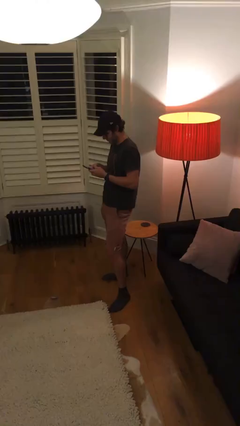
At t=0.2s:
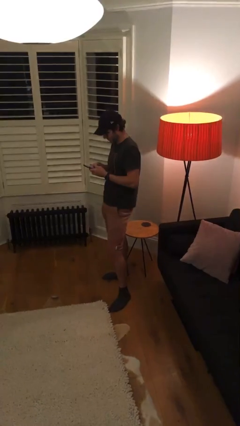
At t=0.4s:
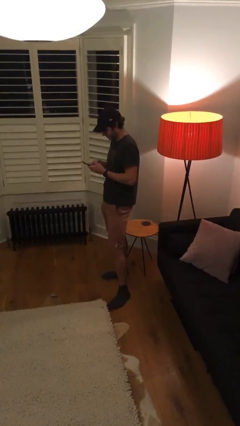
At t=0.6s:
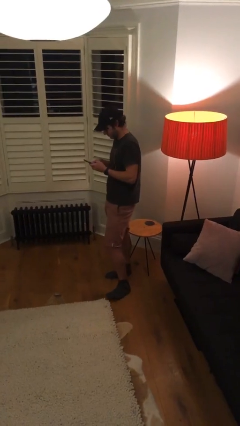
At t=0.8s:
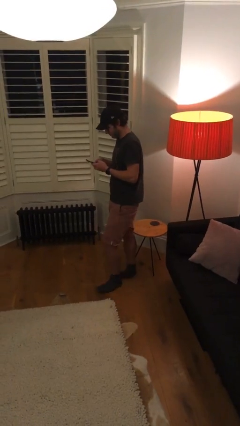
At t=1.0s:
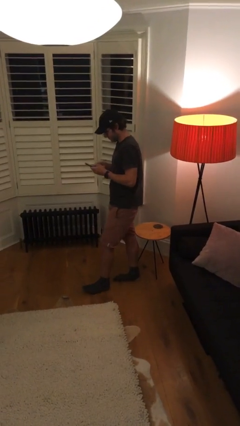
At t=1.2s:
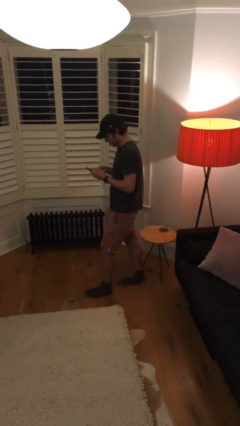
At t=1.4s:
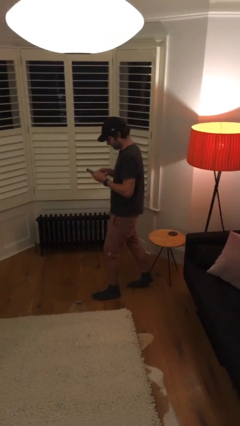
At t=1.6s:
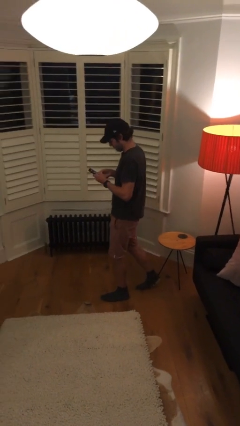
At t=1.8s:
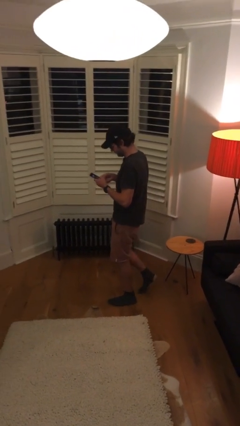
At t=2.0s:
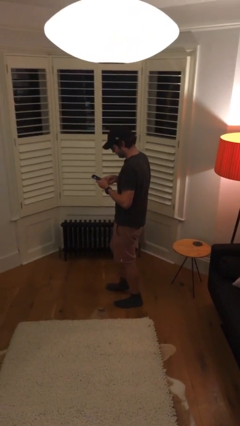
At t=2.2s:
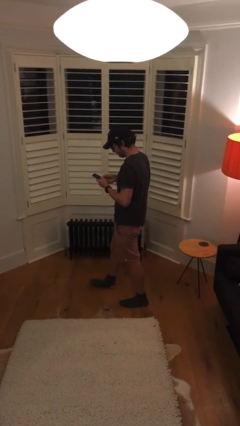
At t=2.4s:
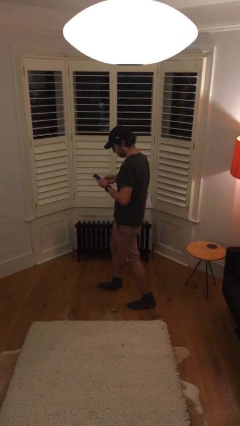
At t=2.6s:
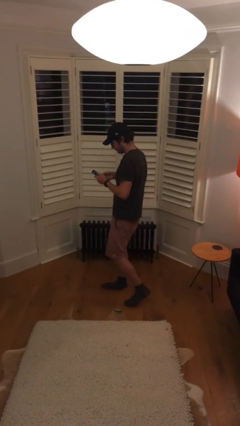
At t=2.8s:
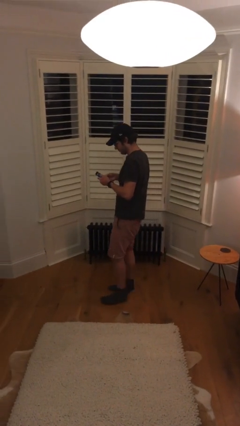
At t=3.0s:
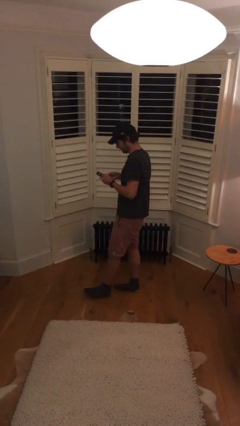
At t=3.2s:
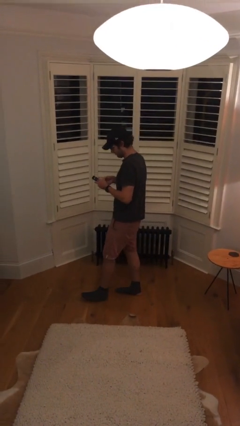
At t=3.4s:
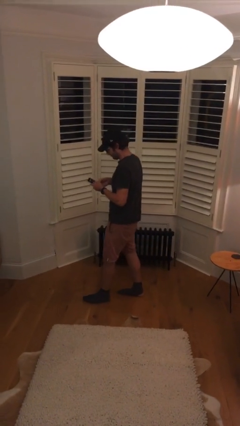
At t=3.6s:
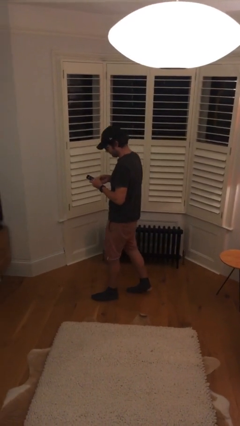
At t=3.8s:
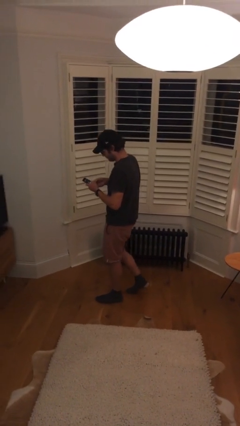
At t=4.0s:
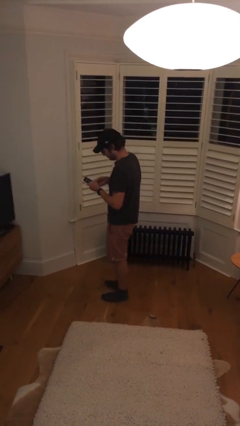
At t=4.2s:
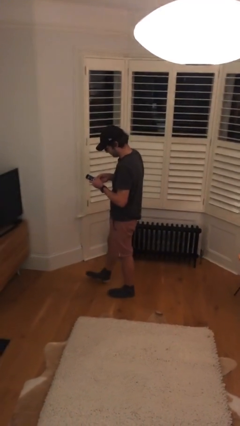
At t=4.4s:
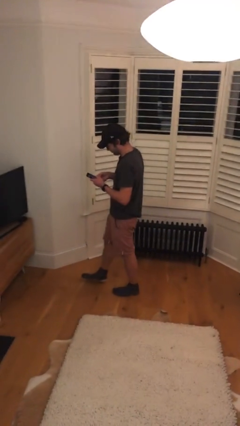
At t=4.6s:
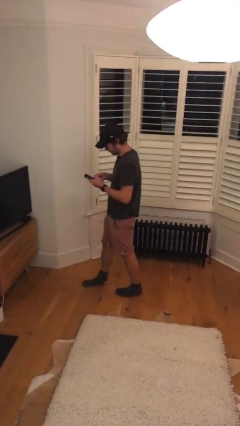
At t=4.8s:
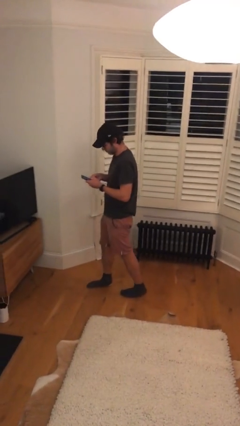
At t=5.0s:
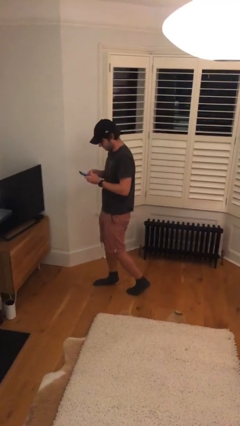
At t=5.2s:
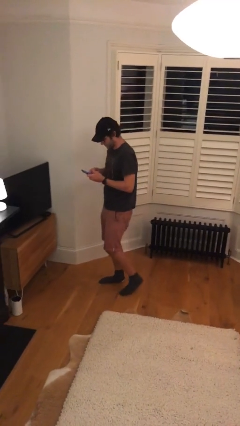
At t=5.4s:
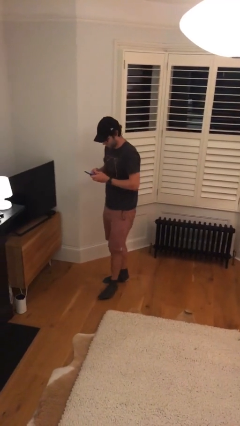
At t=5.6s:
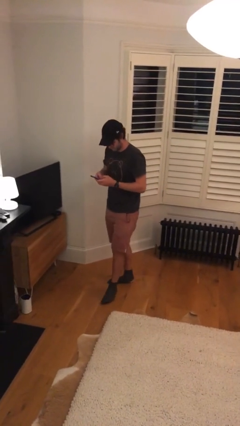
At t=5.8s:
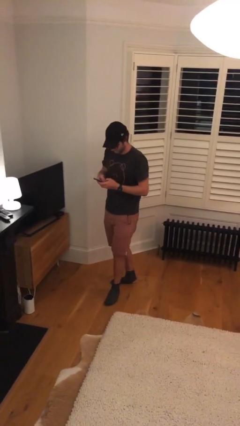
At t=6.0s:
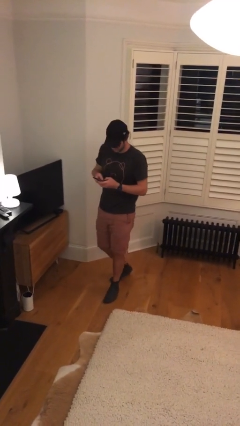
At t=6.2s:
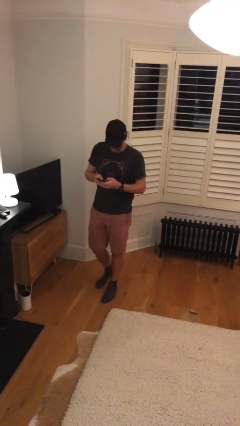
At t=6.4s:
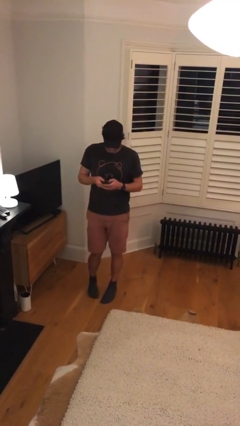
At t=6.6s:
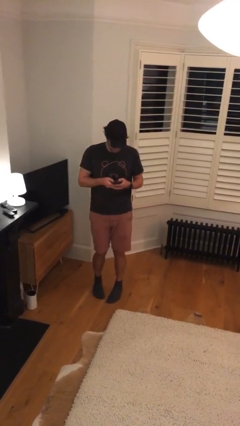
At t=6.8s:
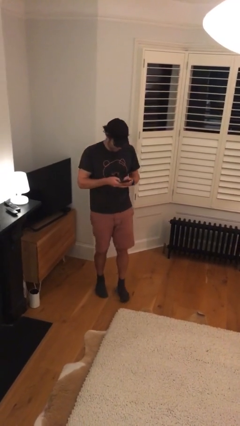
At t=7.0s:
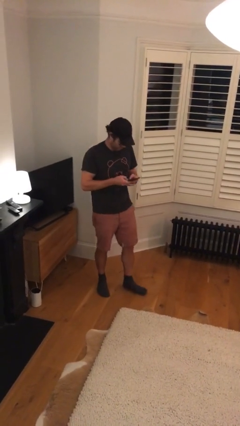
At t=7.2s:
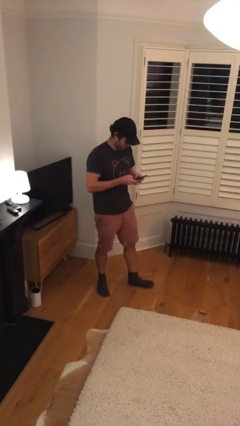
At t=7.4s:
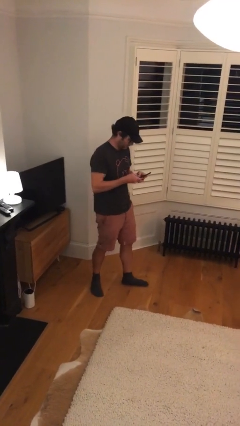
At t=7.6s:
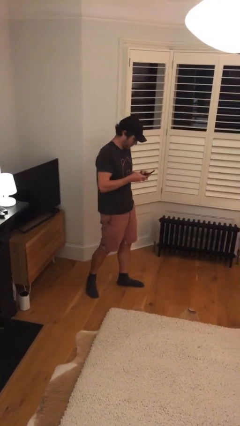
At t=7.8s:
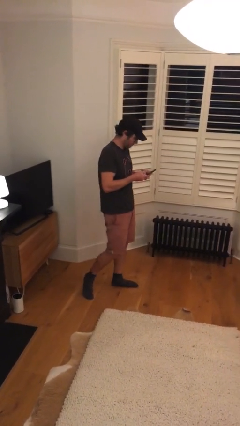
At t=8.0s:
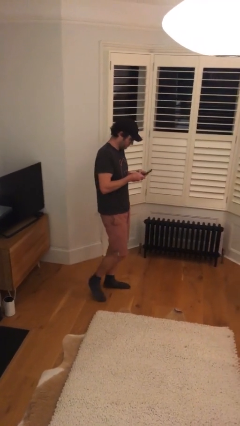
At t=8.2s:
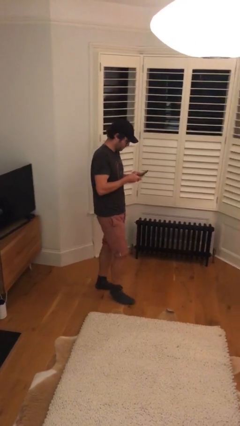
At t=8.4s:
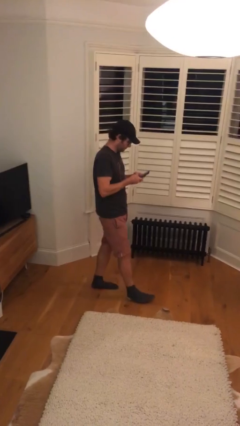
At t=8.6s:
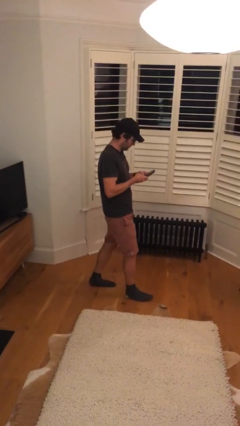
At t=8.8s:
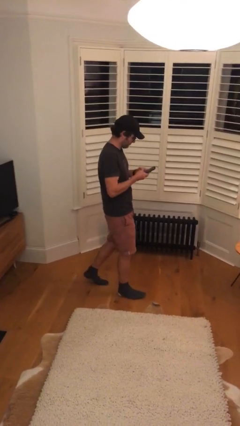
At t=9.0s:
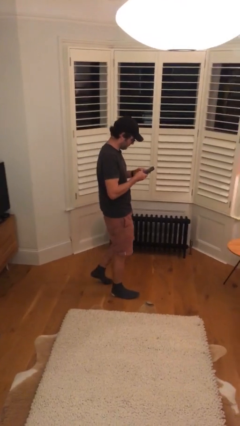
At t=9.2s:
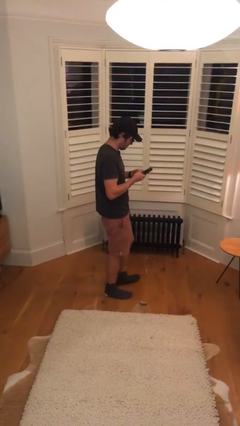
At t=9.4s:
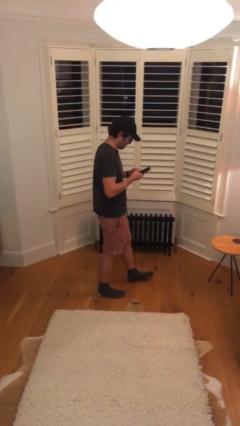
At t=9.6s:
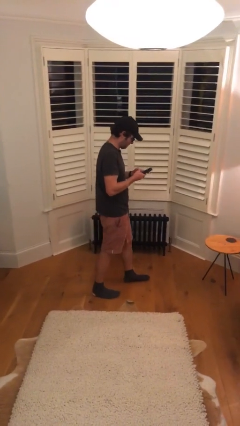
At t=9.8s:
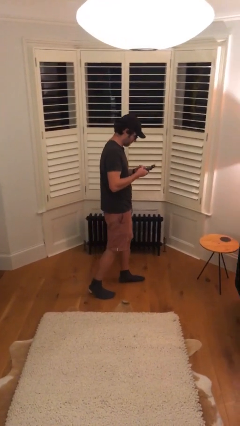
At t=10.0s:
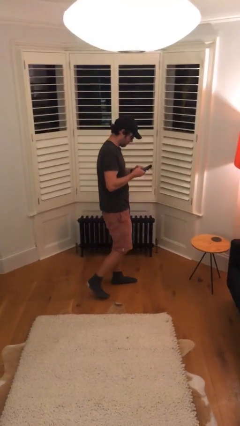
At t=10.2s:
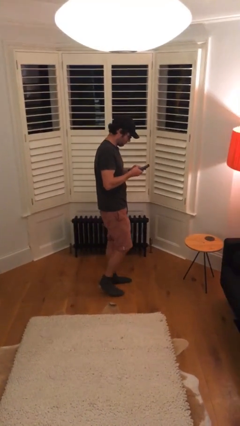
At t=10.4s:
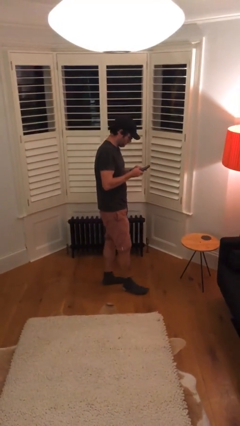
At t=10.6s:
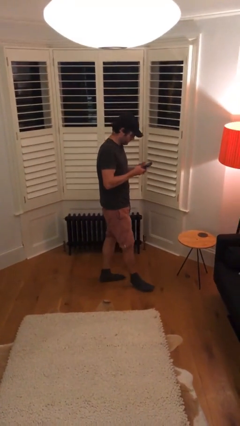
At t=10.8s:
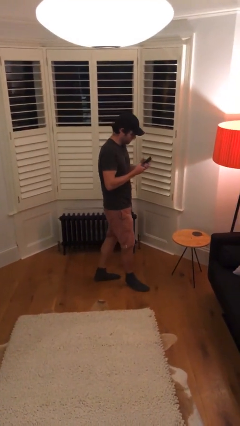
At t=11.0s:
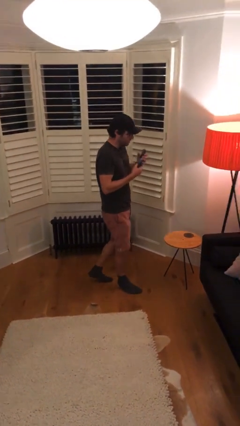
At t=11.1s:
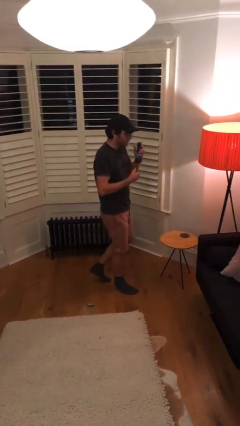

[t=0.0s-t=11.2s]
person texts on phone

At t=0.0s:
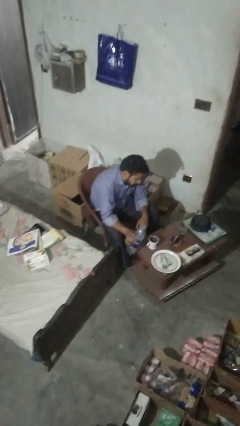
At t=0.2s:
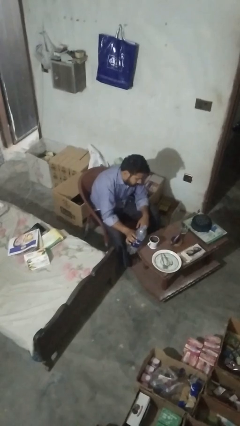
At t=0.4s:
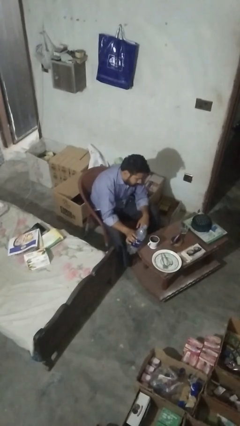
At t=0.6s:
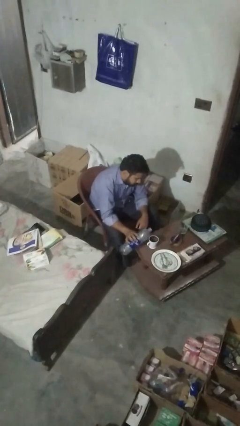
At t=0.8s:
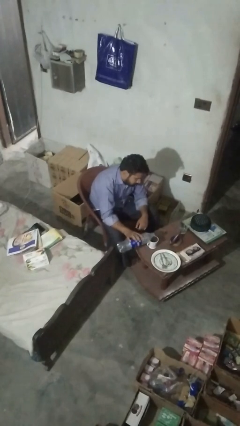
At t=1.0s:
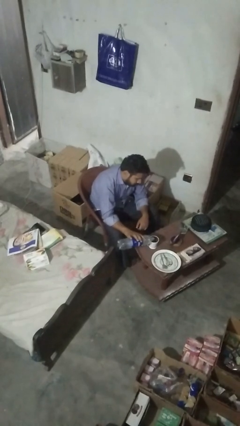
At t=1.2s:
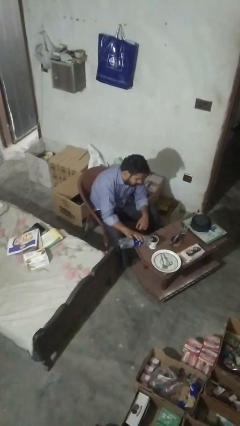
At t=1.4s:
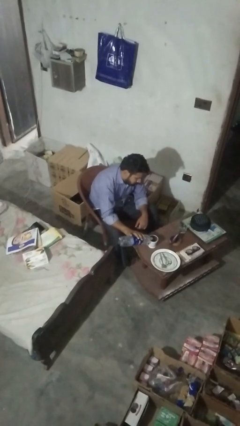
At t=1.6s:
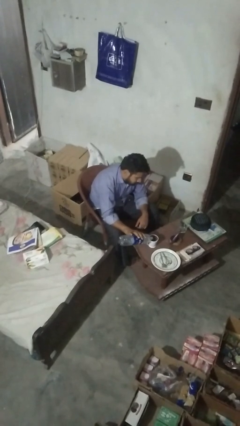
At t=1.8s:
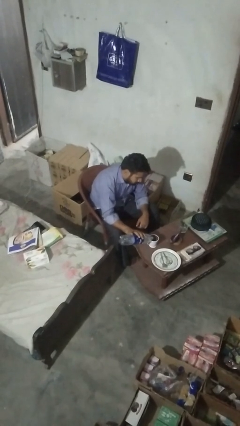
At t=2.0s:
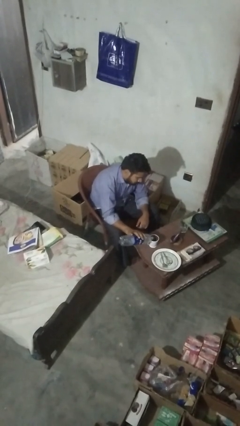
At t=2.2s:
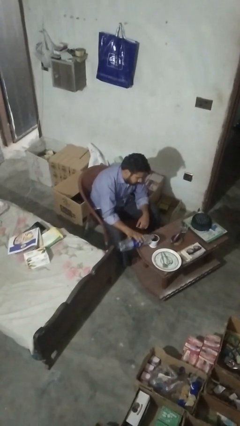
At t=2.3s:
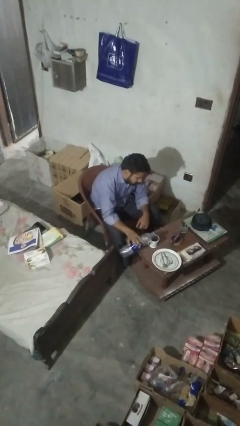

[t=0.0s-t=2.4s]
person pours liquid into cup

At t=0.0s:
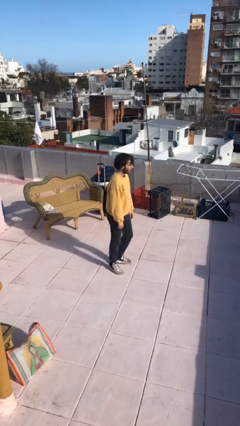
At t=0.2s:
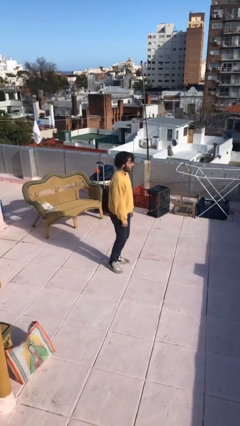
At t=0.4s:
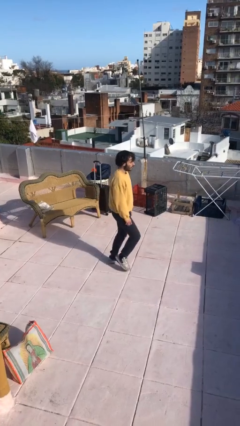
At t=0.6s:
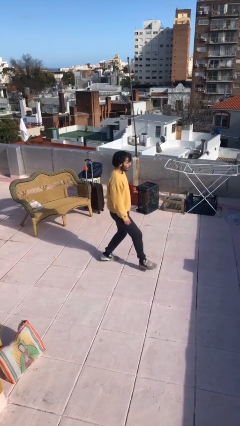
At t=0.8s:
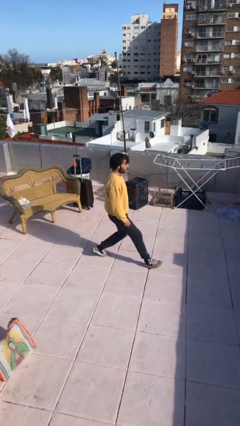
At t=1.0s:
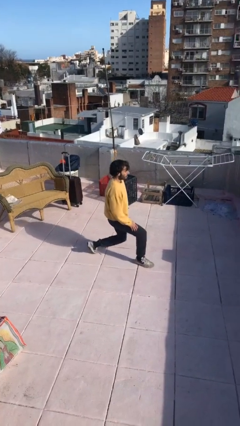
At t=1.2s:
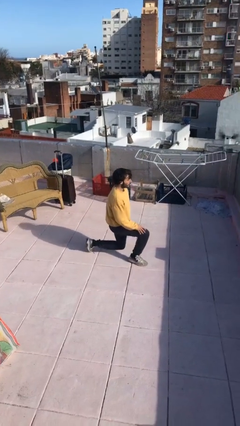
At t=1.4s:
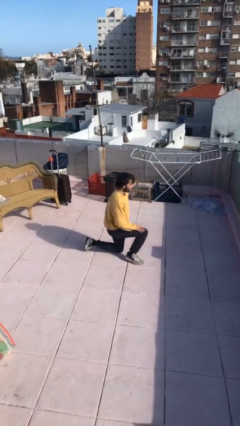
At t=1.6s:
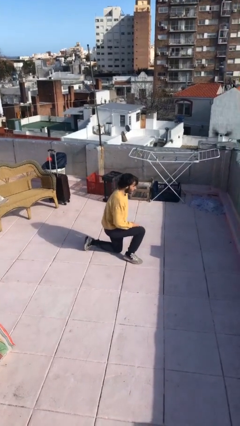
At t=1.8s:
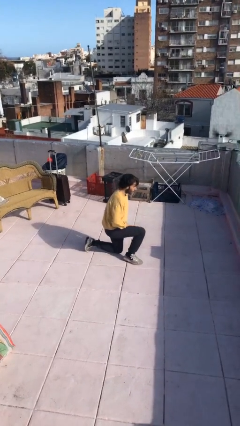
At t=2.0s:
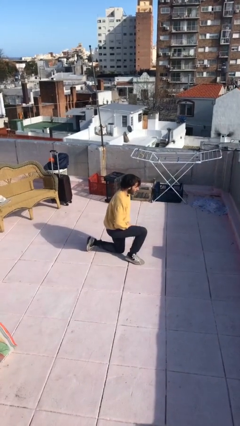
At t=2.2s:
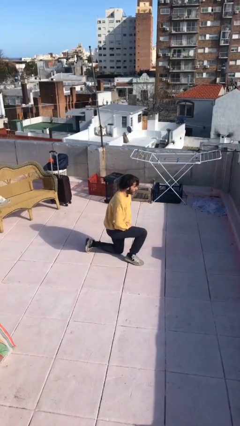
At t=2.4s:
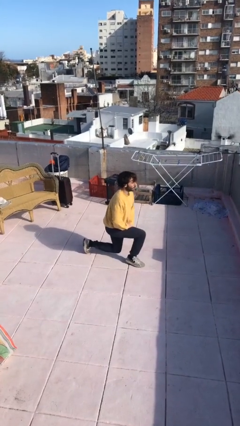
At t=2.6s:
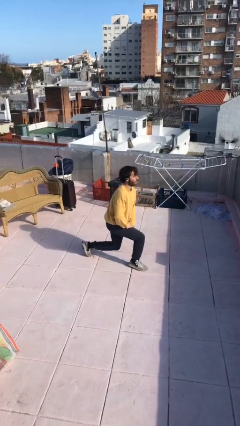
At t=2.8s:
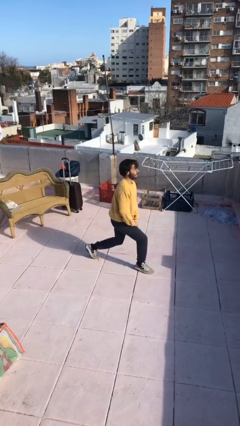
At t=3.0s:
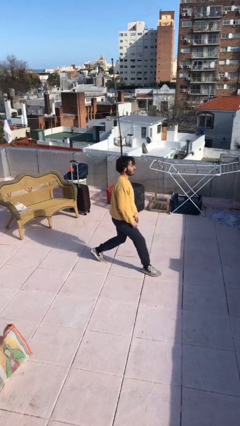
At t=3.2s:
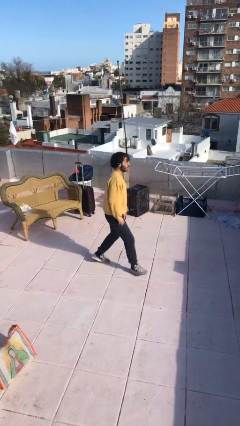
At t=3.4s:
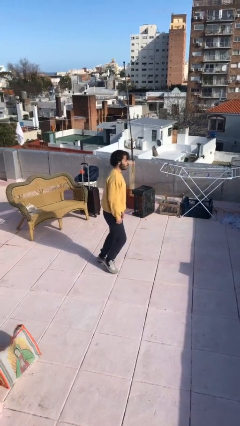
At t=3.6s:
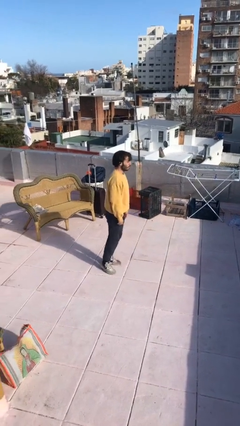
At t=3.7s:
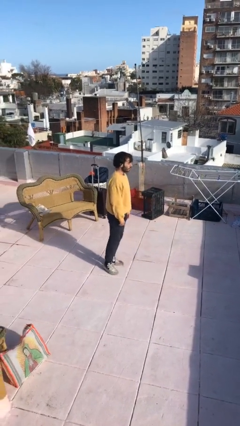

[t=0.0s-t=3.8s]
person exercises with lunges

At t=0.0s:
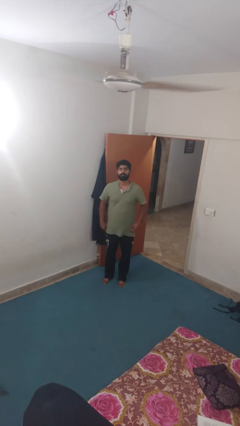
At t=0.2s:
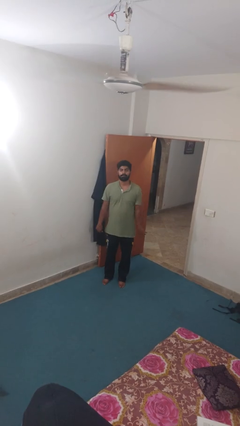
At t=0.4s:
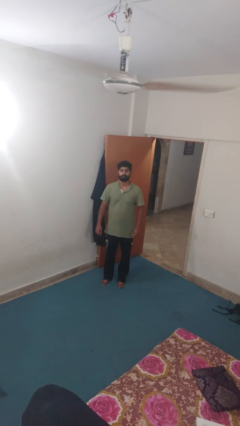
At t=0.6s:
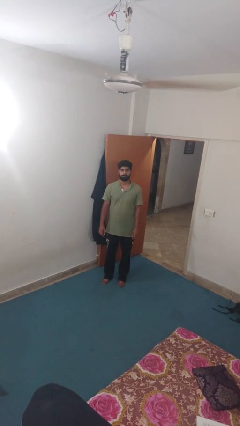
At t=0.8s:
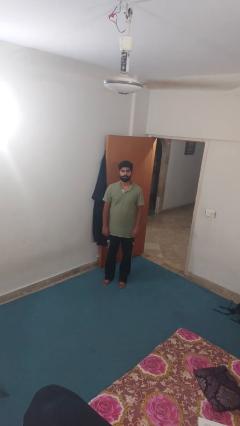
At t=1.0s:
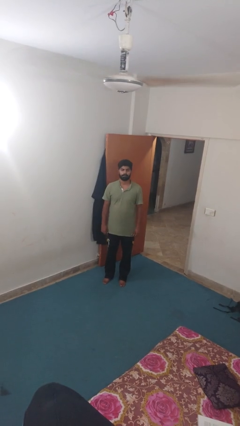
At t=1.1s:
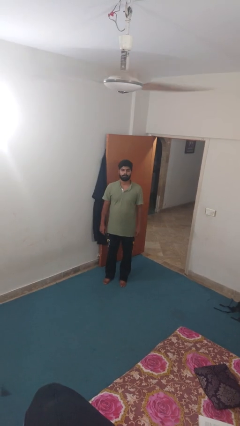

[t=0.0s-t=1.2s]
person jumps
